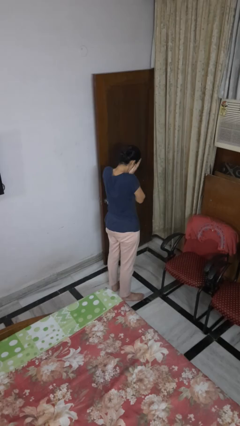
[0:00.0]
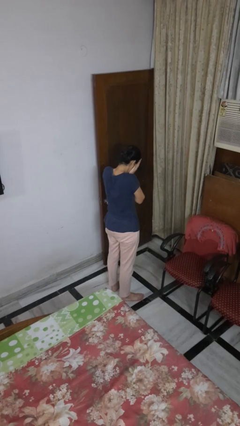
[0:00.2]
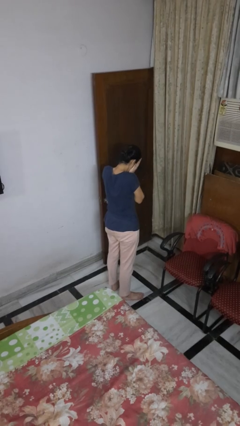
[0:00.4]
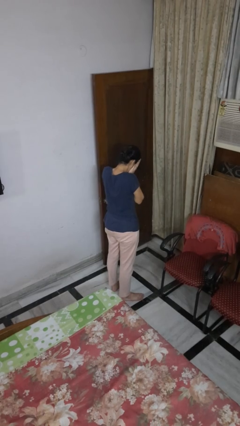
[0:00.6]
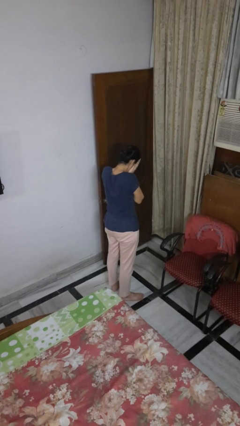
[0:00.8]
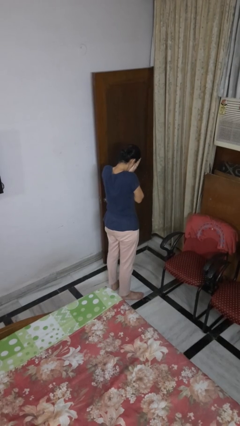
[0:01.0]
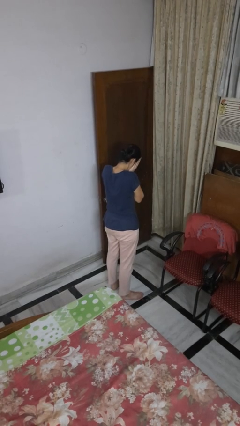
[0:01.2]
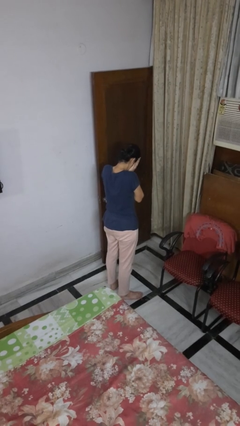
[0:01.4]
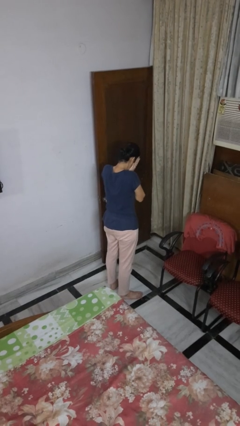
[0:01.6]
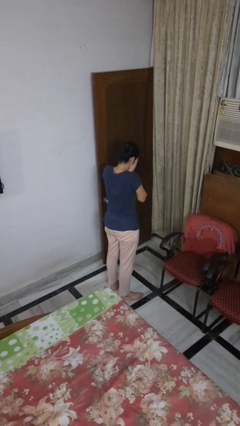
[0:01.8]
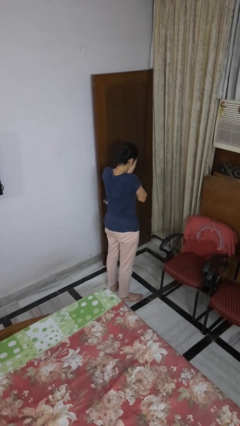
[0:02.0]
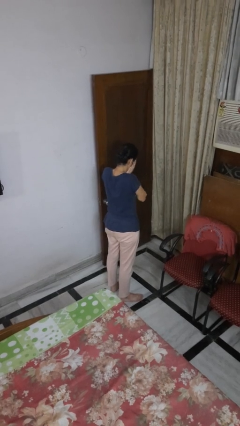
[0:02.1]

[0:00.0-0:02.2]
person covers face with hands

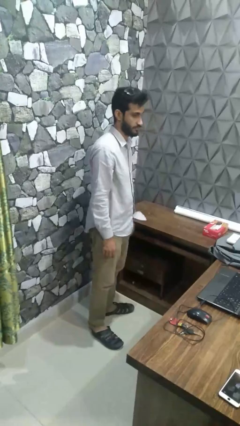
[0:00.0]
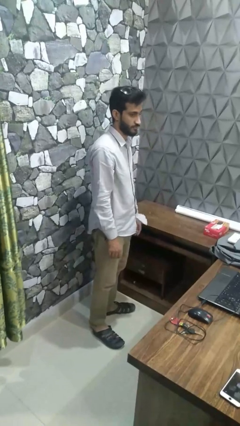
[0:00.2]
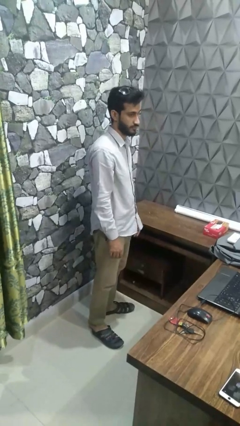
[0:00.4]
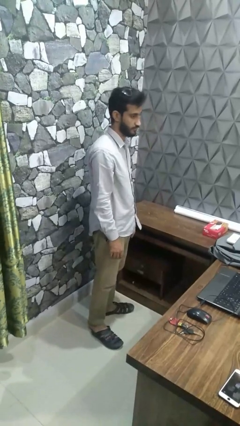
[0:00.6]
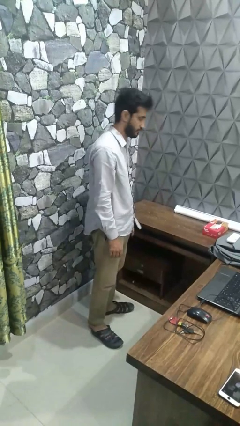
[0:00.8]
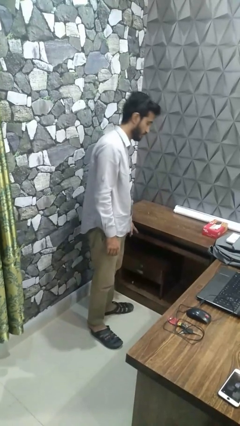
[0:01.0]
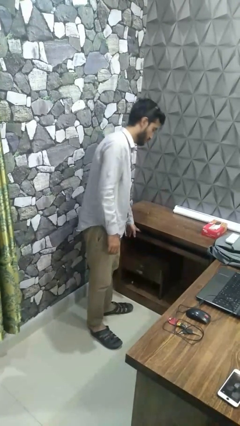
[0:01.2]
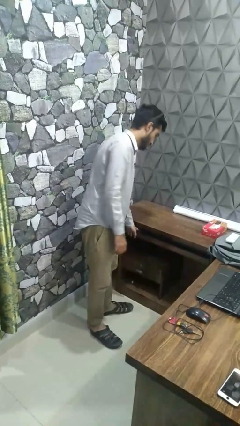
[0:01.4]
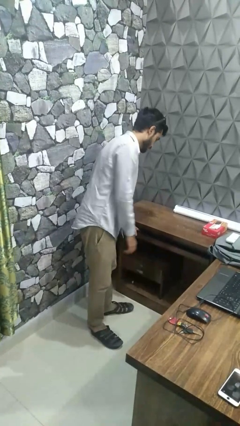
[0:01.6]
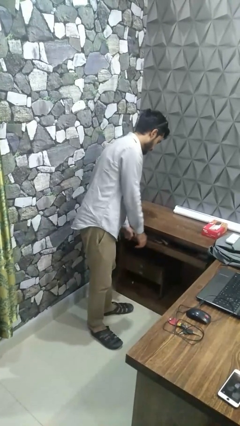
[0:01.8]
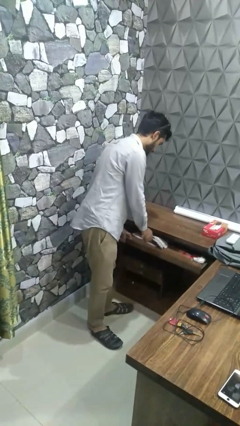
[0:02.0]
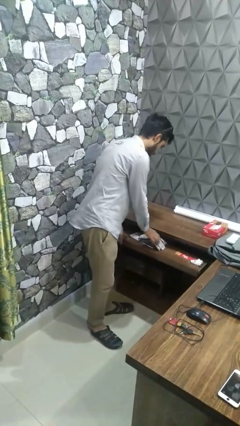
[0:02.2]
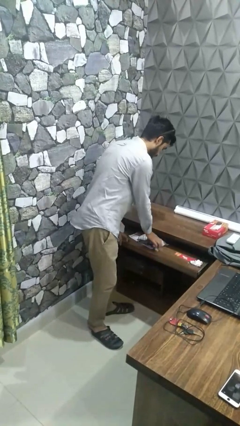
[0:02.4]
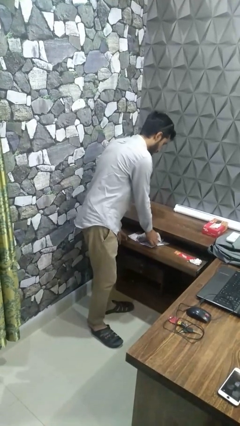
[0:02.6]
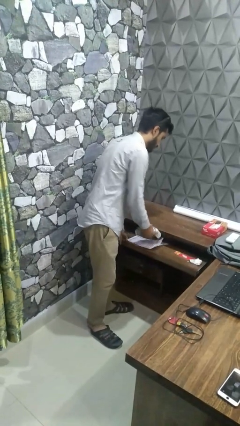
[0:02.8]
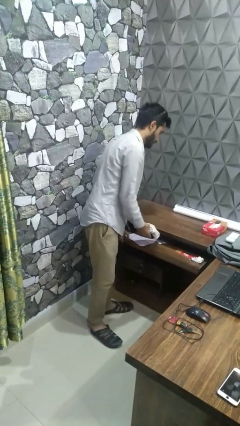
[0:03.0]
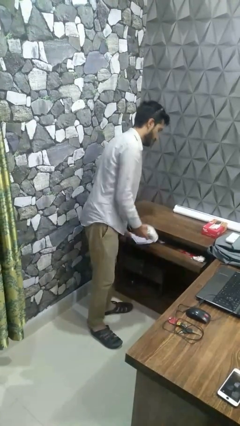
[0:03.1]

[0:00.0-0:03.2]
person takes clothes from dresser

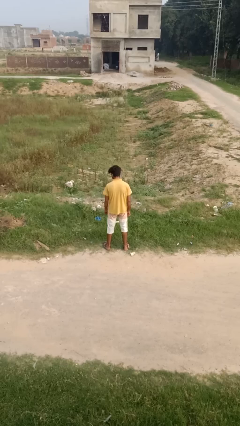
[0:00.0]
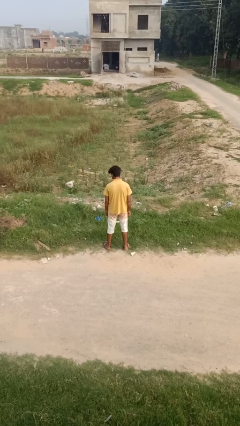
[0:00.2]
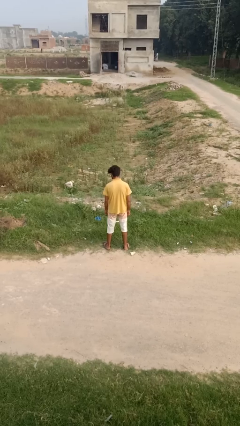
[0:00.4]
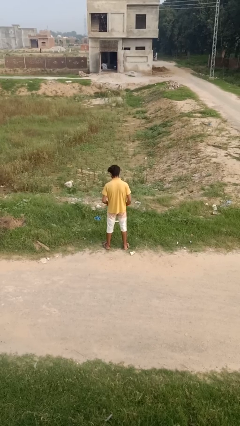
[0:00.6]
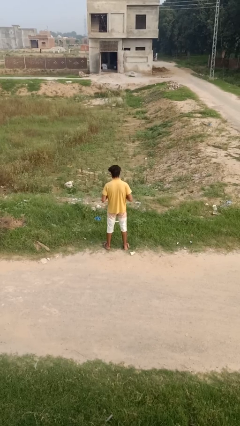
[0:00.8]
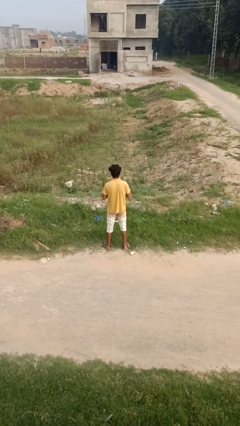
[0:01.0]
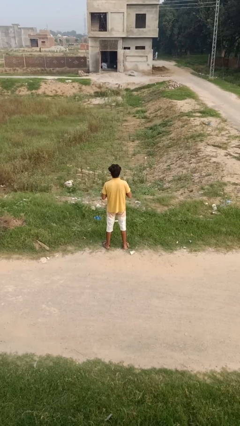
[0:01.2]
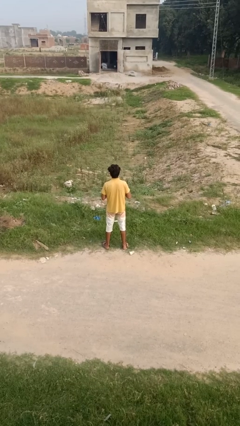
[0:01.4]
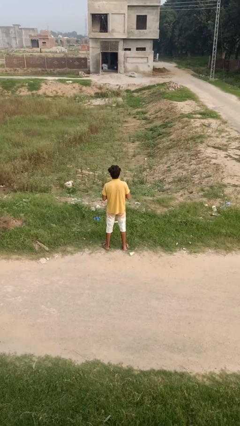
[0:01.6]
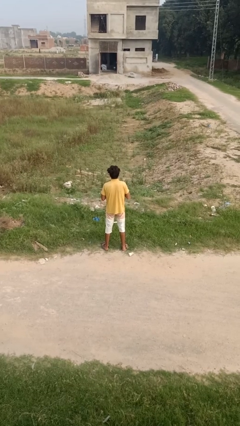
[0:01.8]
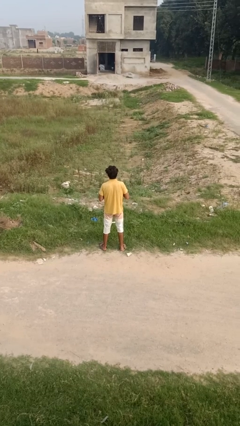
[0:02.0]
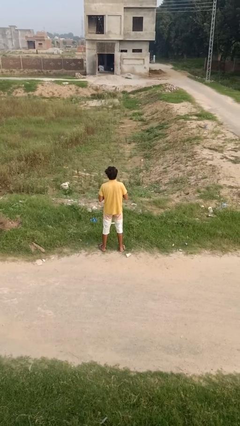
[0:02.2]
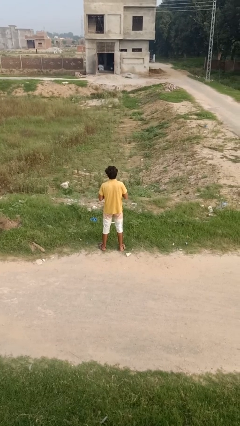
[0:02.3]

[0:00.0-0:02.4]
person unbuttons shirt

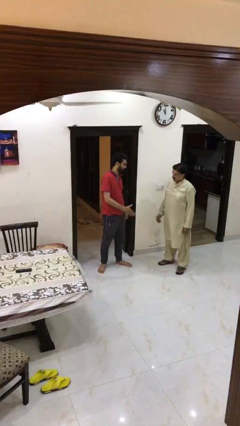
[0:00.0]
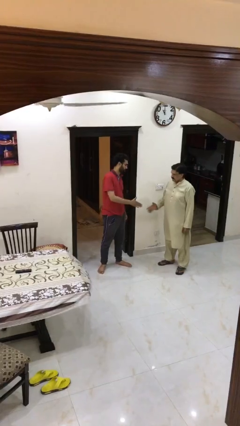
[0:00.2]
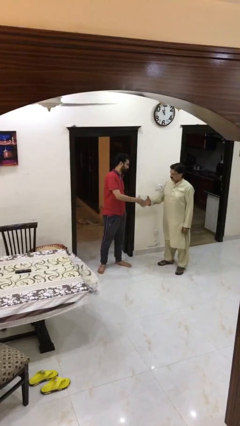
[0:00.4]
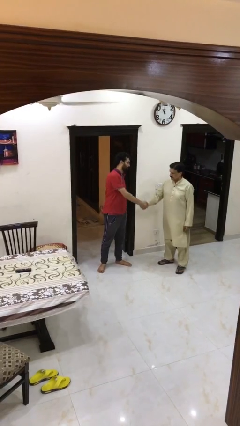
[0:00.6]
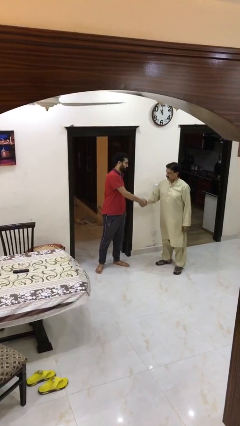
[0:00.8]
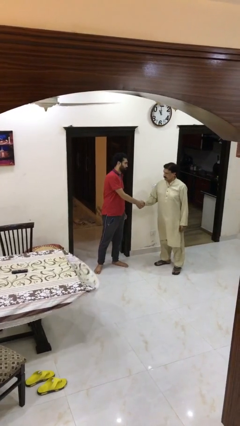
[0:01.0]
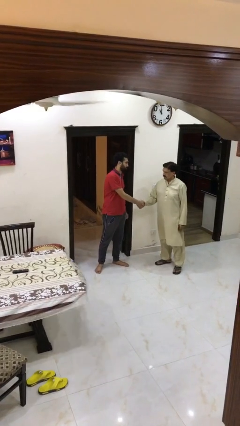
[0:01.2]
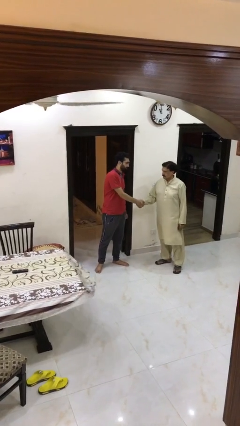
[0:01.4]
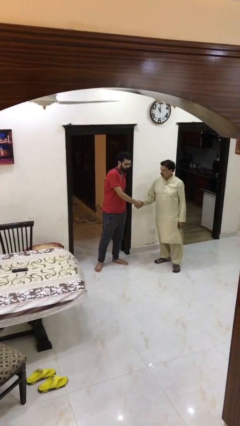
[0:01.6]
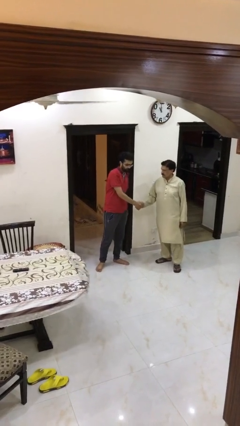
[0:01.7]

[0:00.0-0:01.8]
person shakes hand

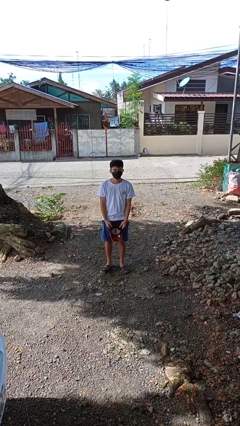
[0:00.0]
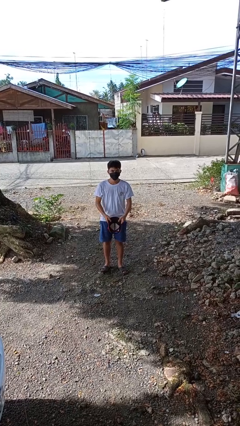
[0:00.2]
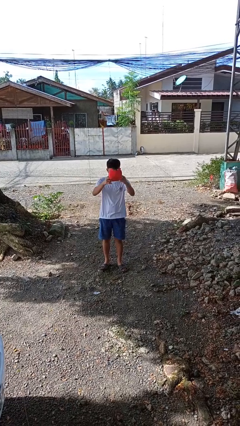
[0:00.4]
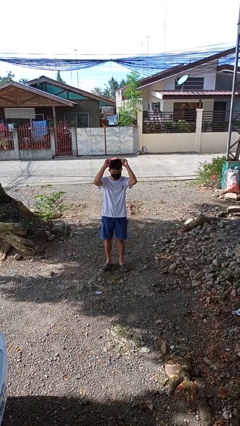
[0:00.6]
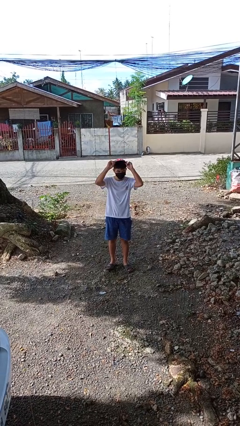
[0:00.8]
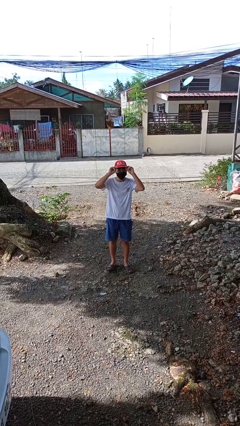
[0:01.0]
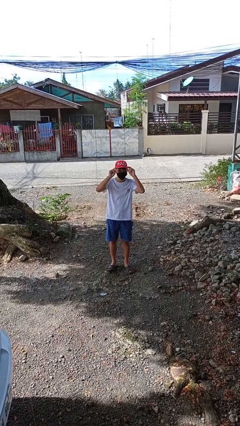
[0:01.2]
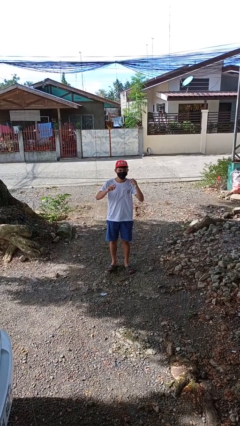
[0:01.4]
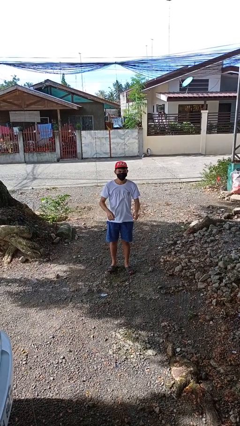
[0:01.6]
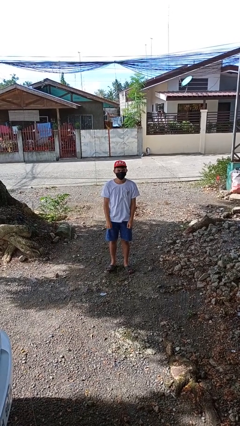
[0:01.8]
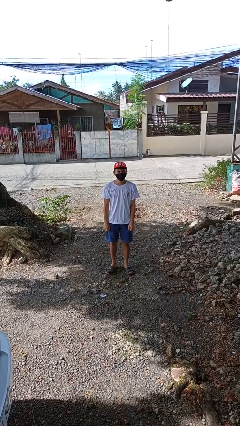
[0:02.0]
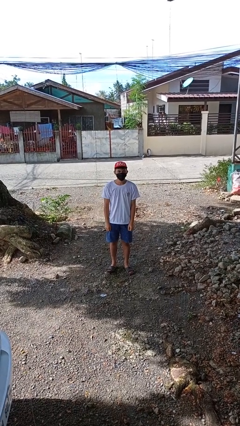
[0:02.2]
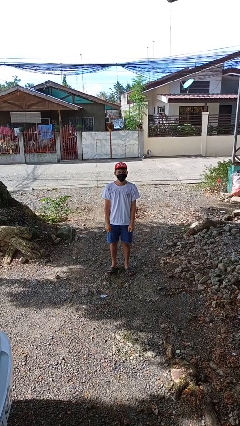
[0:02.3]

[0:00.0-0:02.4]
person puts on hat

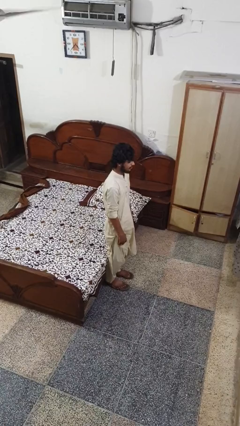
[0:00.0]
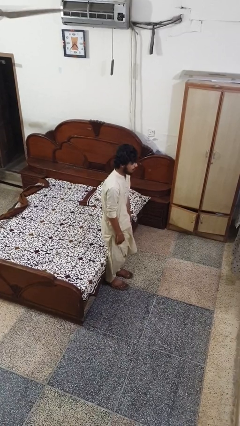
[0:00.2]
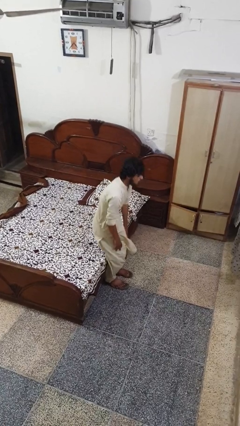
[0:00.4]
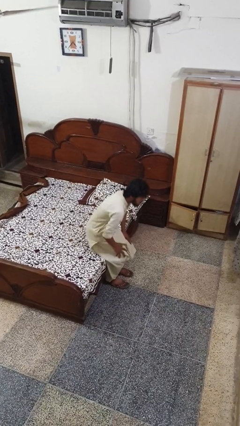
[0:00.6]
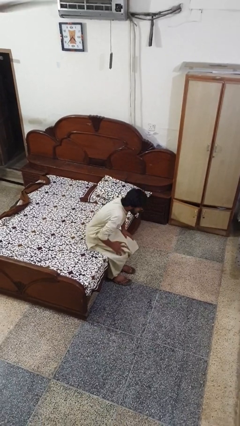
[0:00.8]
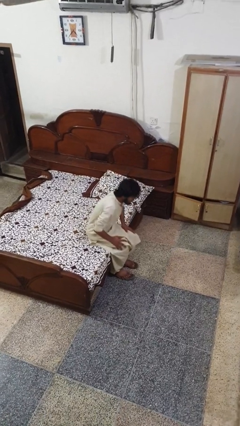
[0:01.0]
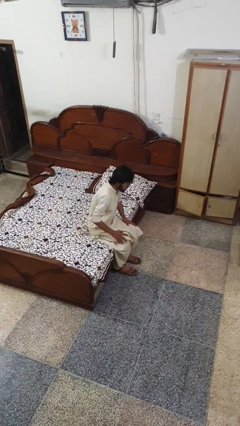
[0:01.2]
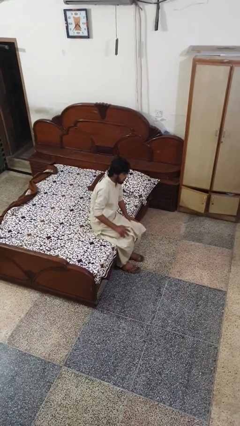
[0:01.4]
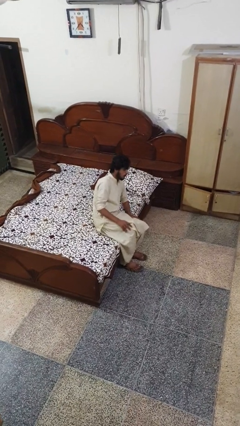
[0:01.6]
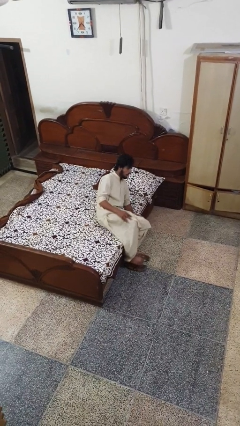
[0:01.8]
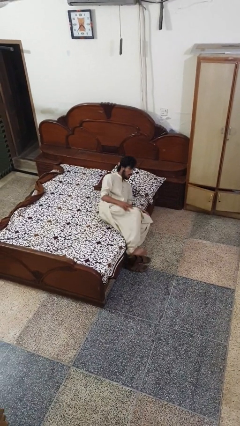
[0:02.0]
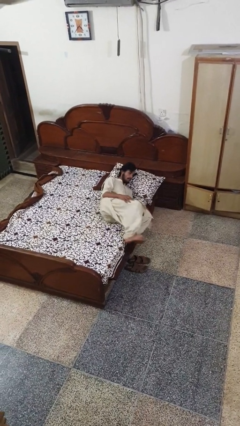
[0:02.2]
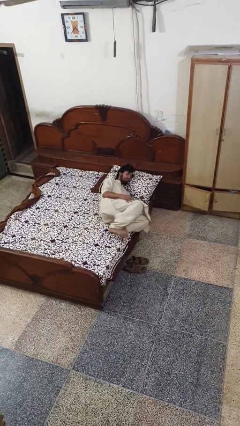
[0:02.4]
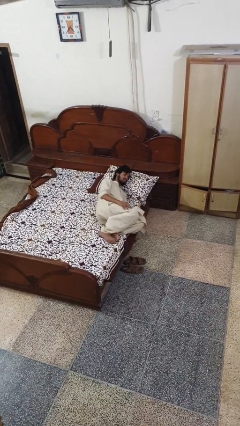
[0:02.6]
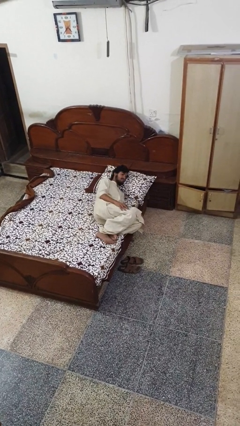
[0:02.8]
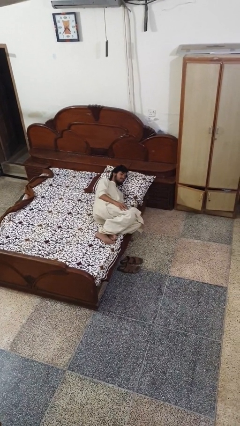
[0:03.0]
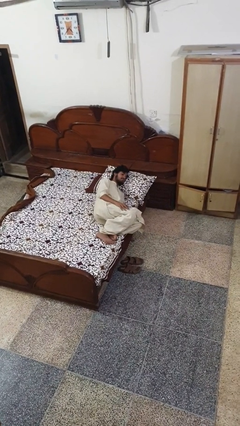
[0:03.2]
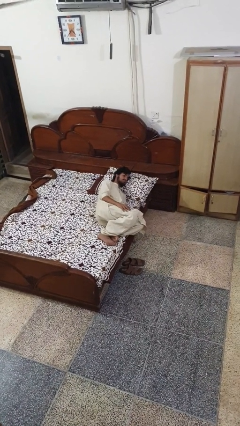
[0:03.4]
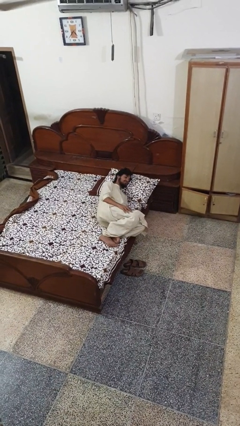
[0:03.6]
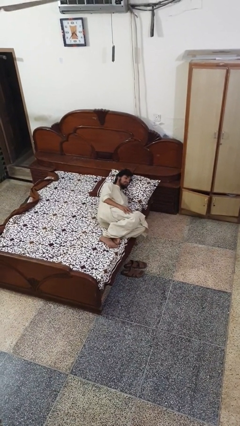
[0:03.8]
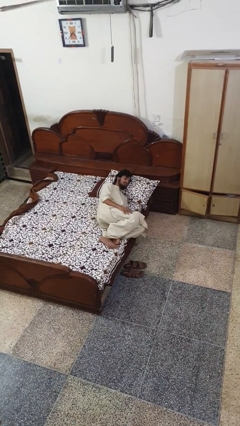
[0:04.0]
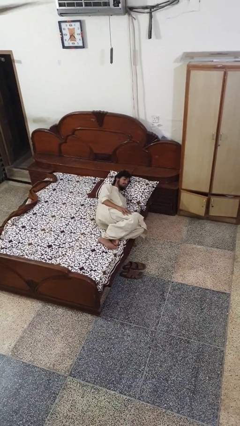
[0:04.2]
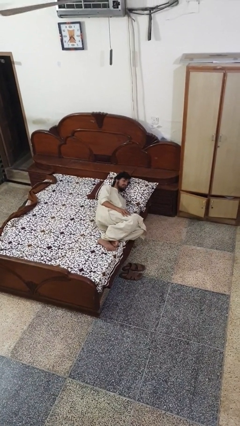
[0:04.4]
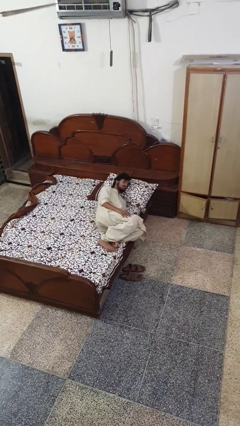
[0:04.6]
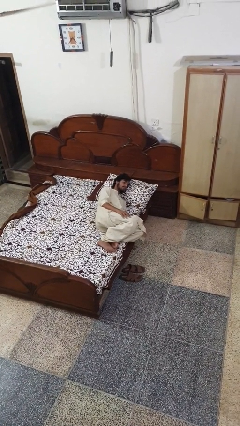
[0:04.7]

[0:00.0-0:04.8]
person lies down on bed

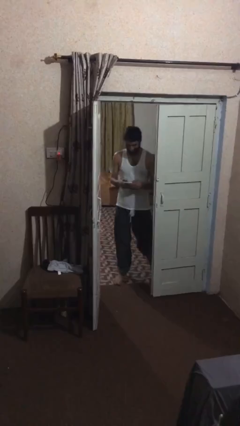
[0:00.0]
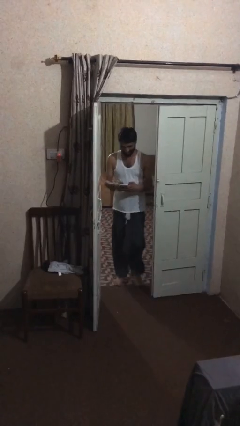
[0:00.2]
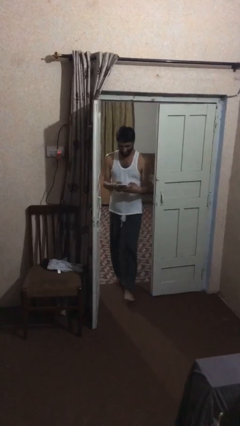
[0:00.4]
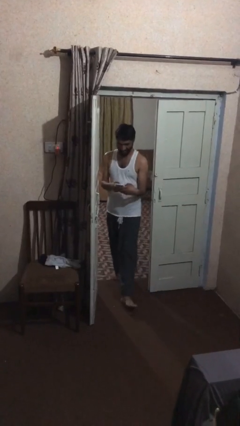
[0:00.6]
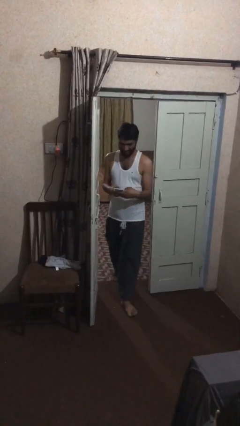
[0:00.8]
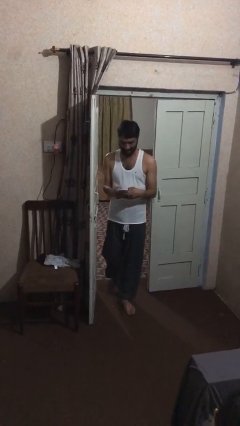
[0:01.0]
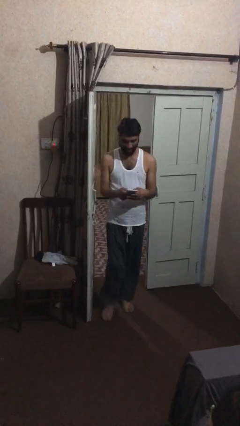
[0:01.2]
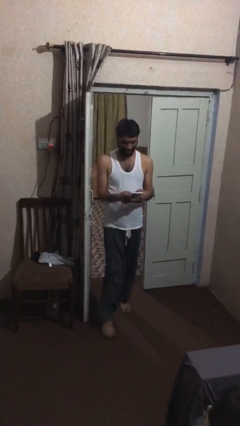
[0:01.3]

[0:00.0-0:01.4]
person enters scene through structure
